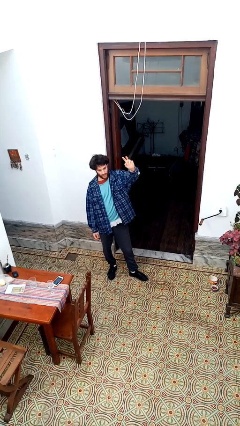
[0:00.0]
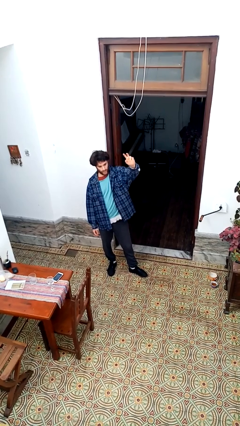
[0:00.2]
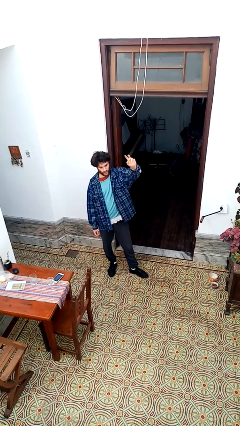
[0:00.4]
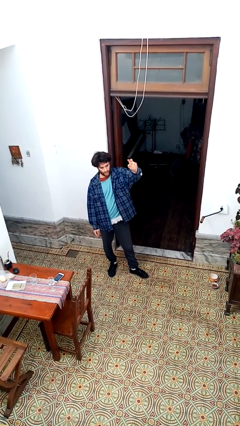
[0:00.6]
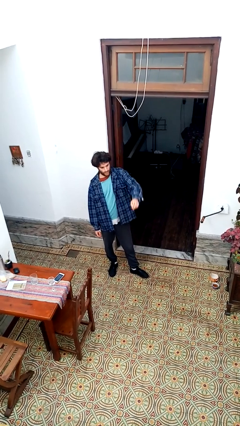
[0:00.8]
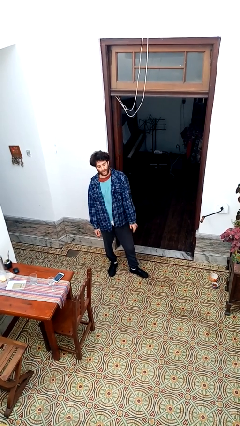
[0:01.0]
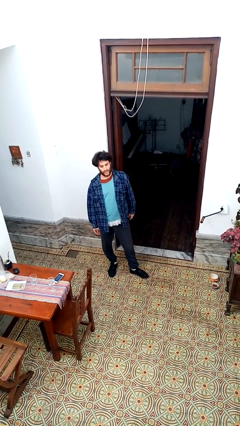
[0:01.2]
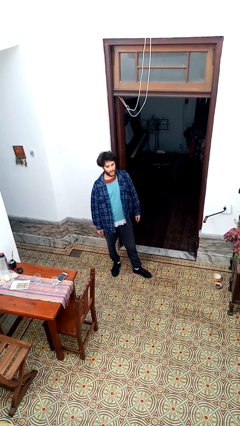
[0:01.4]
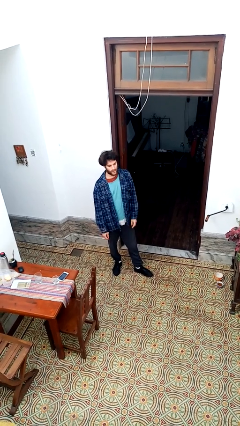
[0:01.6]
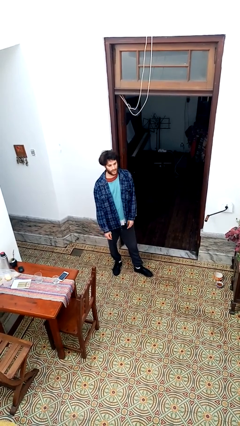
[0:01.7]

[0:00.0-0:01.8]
person gestures lower hand

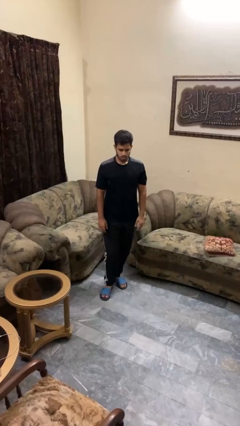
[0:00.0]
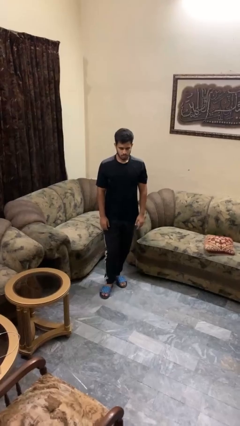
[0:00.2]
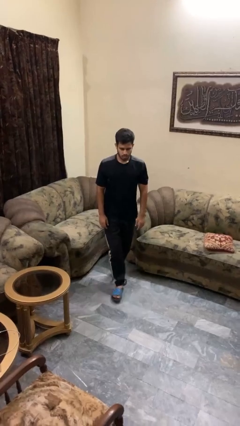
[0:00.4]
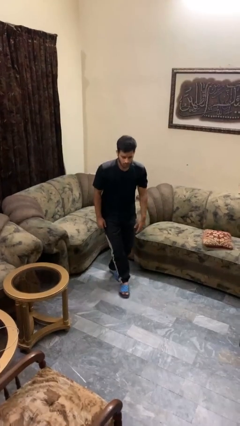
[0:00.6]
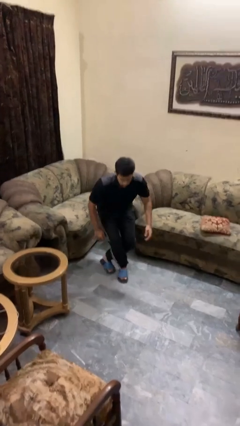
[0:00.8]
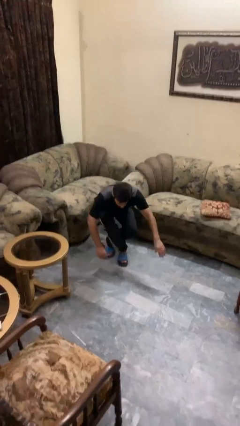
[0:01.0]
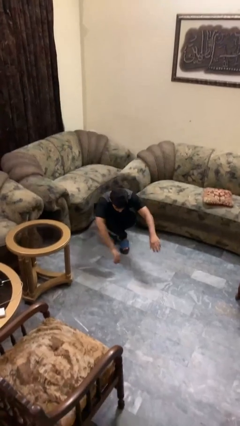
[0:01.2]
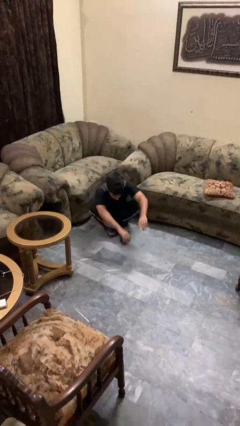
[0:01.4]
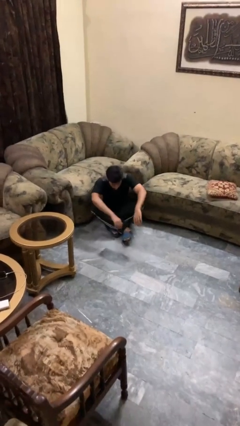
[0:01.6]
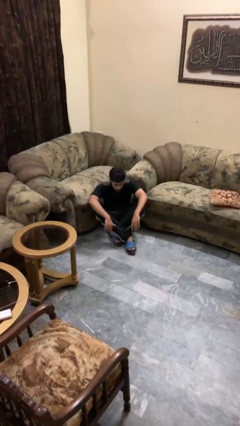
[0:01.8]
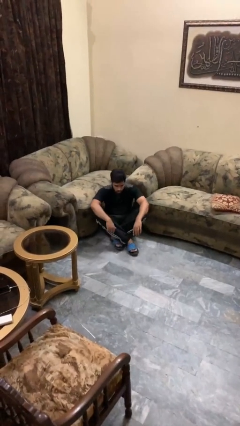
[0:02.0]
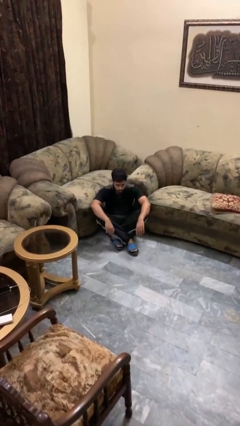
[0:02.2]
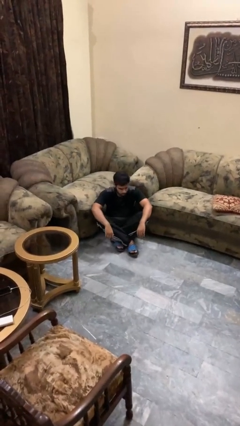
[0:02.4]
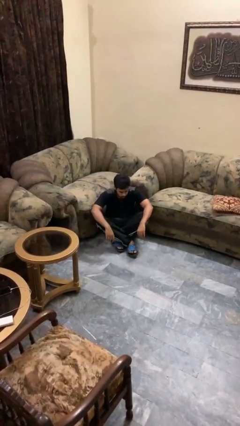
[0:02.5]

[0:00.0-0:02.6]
person sits crisscross

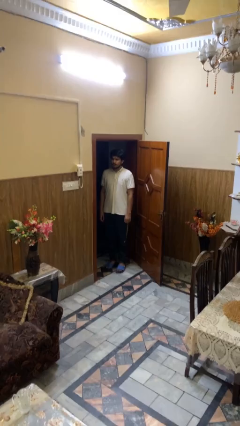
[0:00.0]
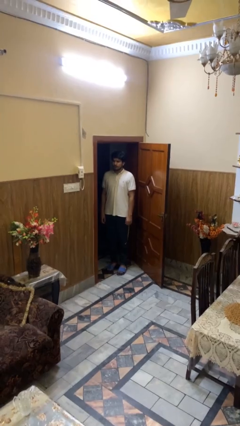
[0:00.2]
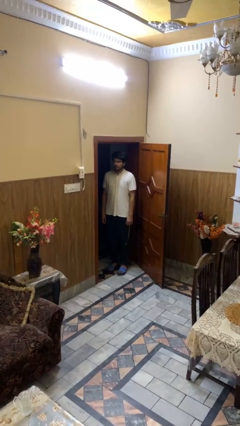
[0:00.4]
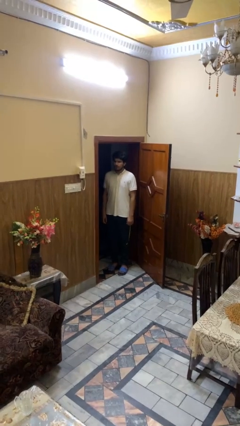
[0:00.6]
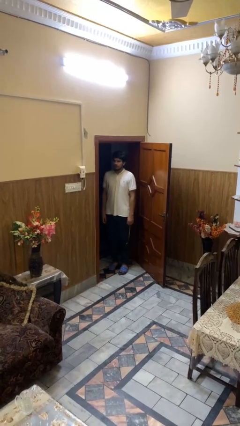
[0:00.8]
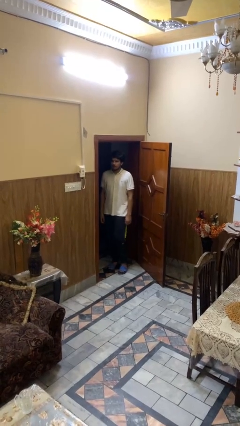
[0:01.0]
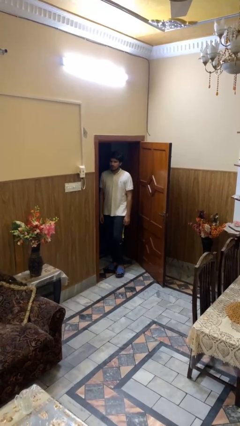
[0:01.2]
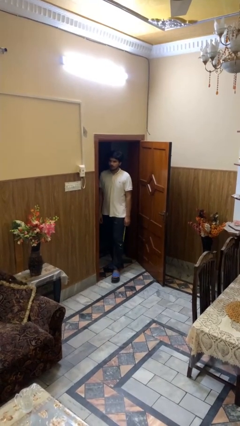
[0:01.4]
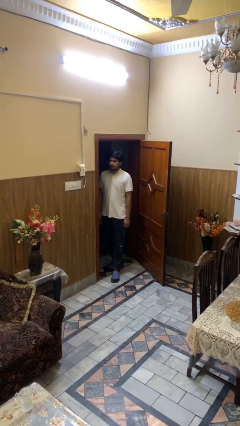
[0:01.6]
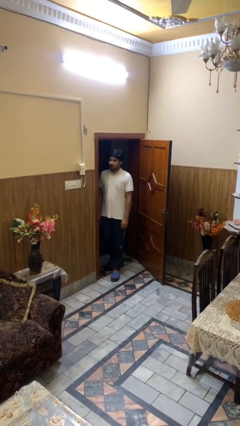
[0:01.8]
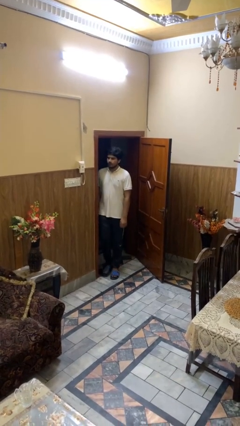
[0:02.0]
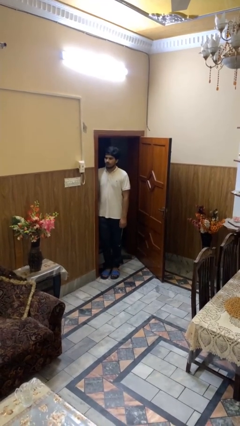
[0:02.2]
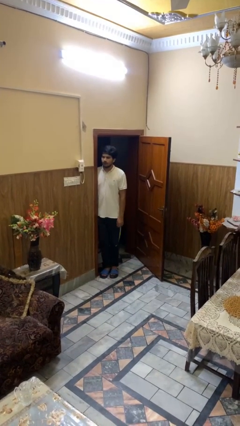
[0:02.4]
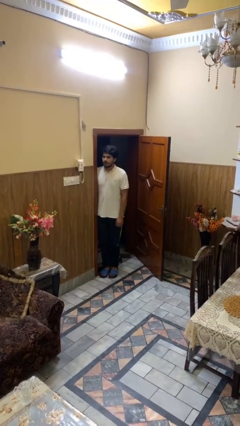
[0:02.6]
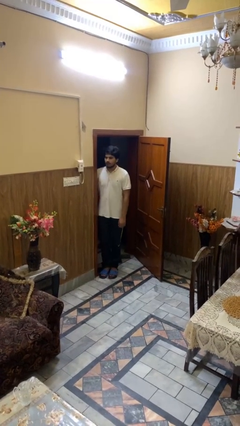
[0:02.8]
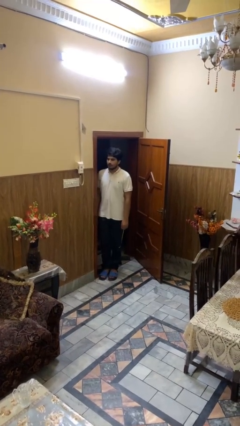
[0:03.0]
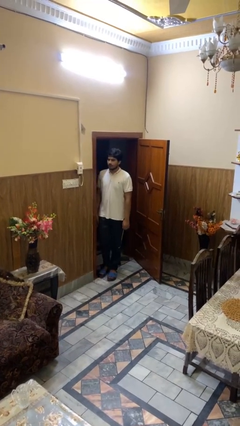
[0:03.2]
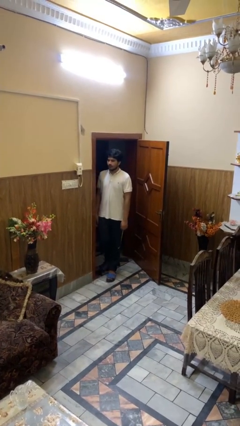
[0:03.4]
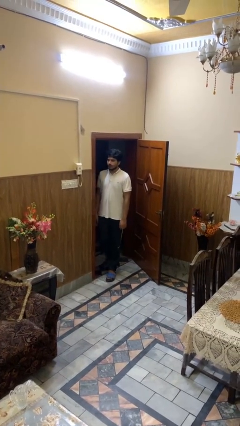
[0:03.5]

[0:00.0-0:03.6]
person bumps into wall

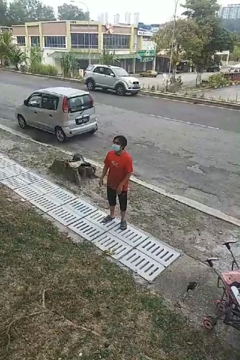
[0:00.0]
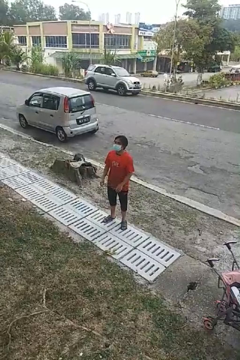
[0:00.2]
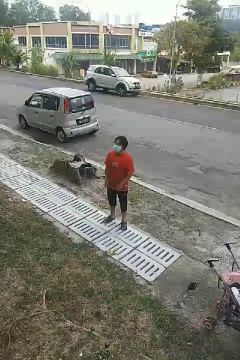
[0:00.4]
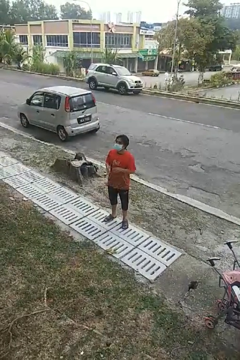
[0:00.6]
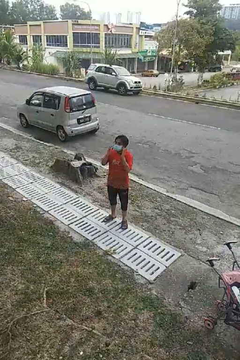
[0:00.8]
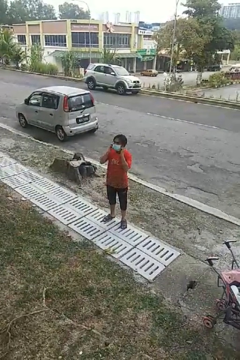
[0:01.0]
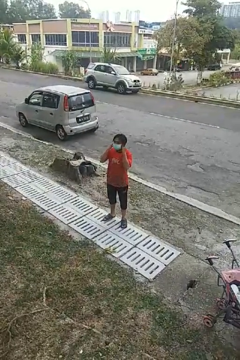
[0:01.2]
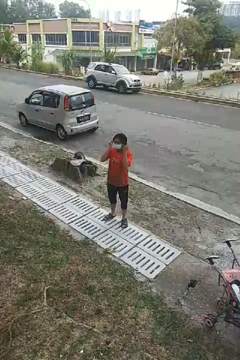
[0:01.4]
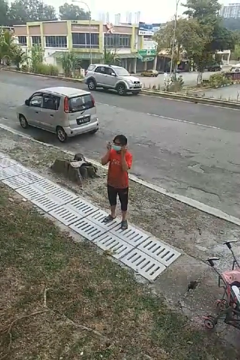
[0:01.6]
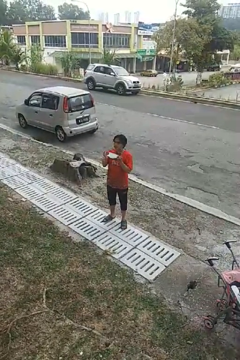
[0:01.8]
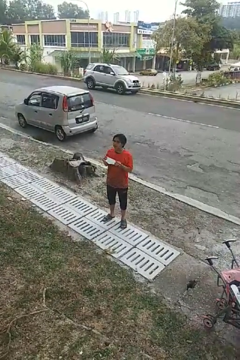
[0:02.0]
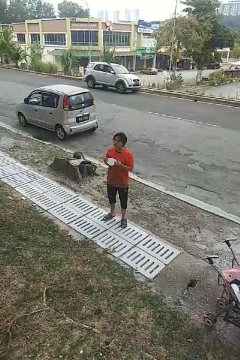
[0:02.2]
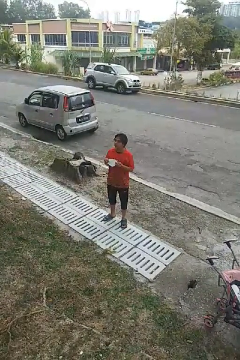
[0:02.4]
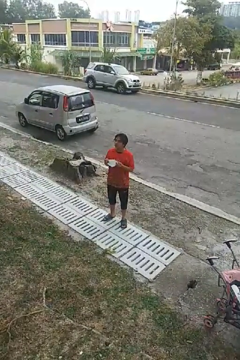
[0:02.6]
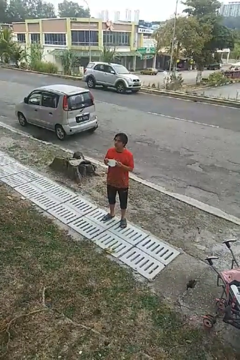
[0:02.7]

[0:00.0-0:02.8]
person takes off facemask

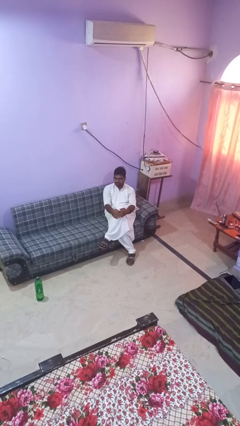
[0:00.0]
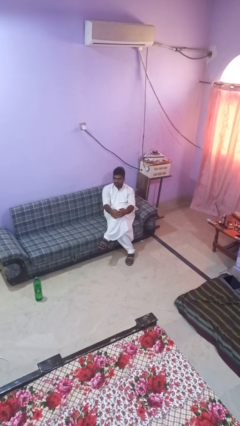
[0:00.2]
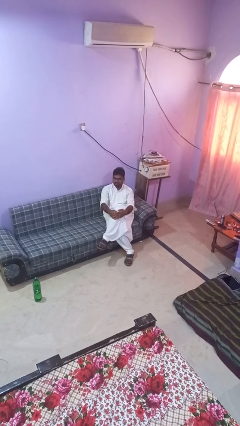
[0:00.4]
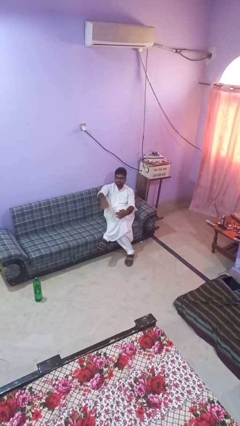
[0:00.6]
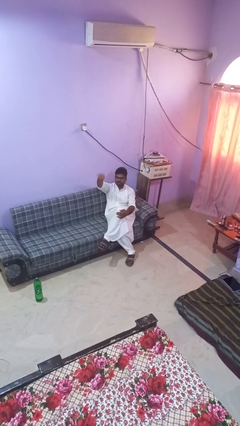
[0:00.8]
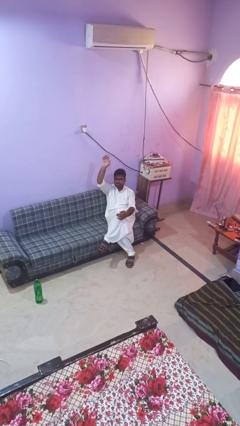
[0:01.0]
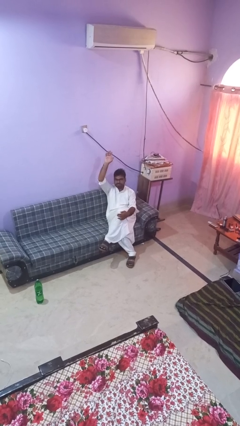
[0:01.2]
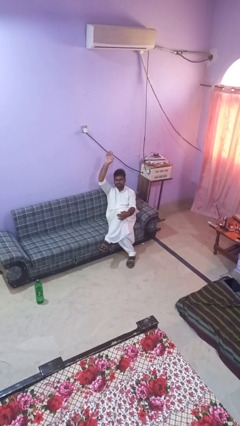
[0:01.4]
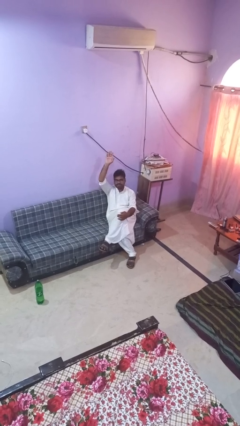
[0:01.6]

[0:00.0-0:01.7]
person gestures raise hand

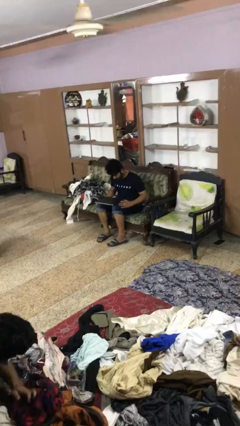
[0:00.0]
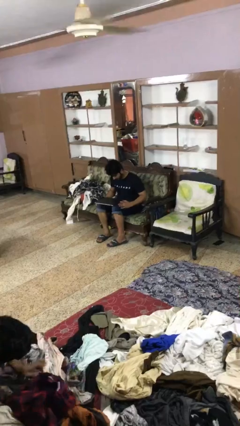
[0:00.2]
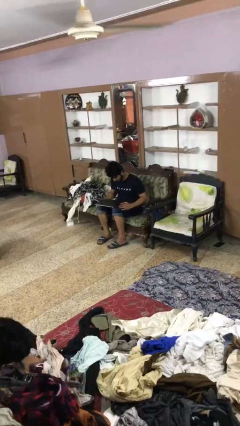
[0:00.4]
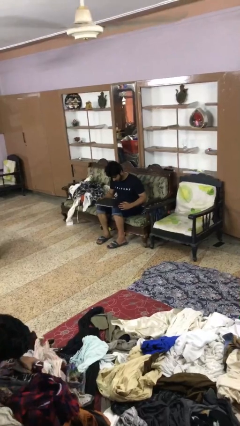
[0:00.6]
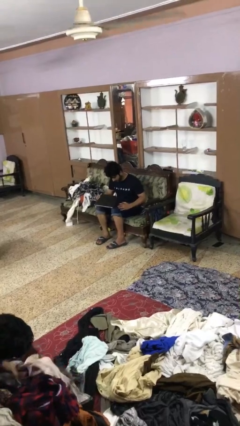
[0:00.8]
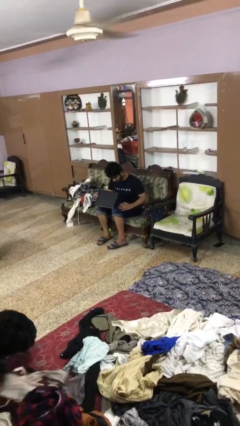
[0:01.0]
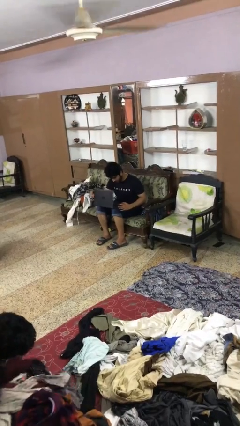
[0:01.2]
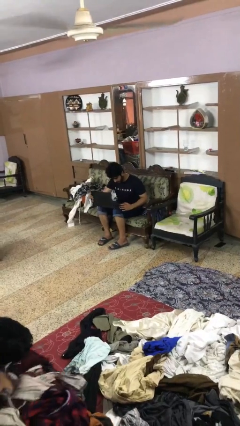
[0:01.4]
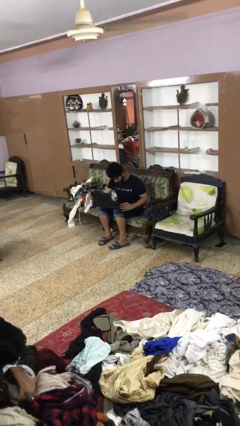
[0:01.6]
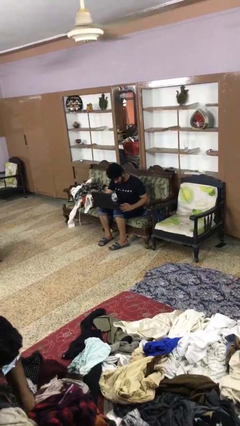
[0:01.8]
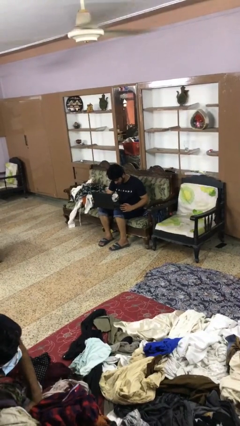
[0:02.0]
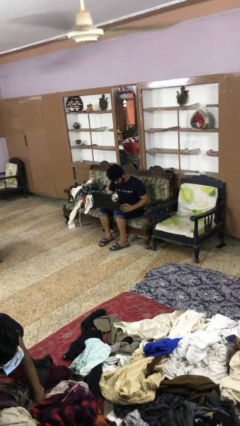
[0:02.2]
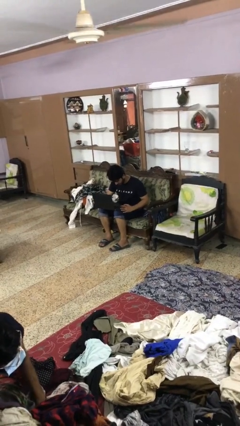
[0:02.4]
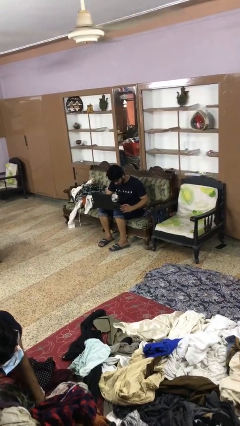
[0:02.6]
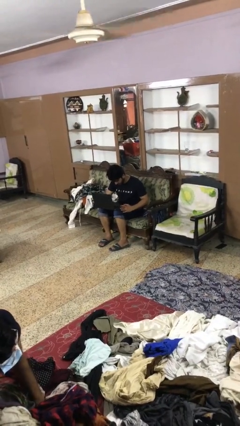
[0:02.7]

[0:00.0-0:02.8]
person opens laptop

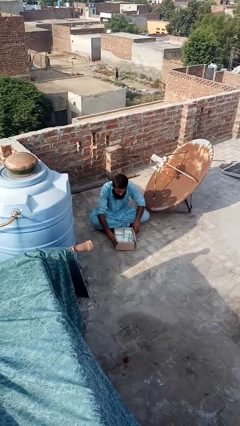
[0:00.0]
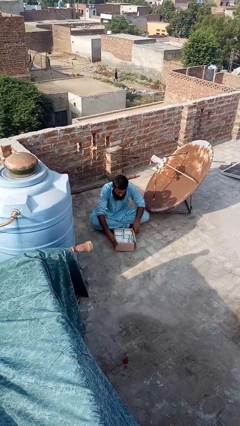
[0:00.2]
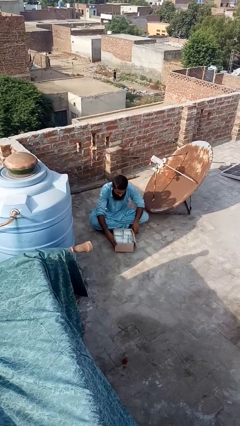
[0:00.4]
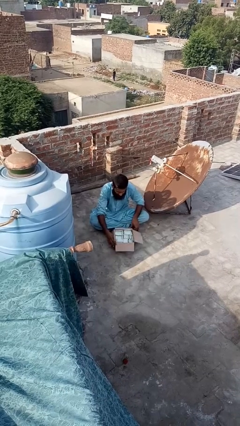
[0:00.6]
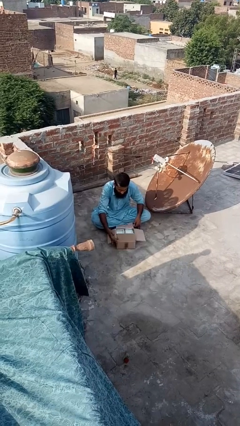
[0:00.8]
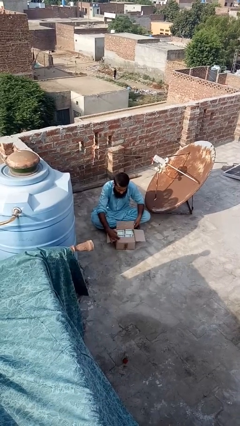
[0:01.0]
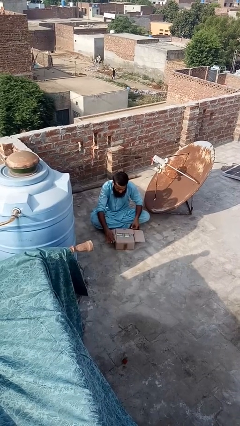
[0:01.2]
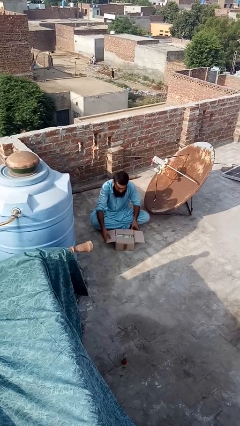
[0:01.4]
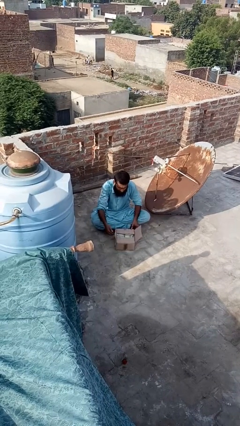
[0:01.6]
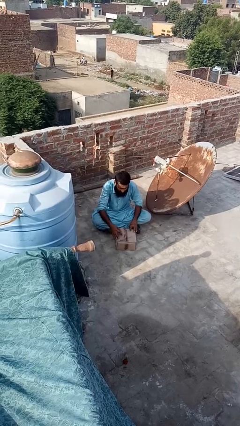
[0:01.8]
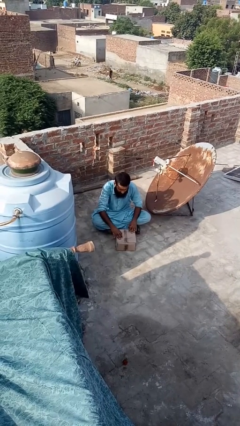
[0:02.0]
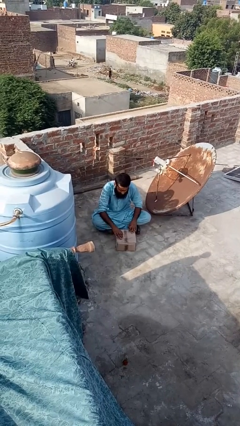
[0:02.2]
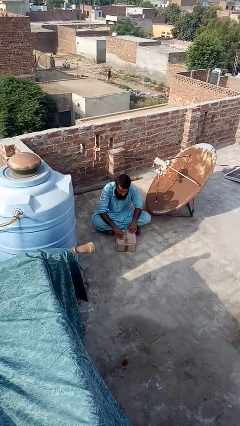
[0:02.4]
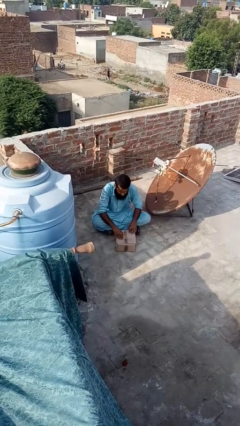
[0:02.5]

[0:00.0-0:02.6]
person closes box
